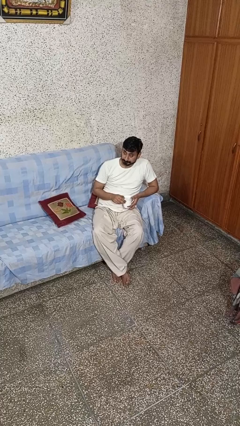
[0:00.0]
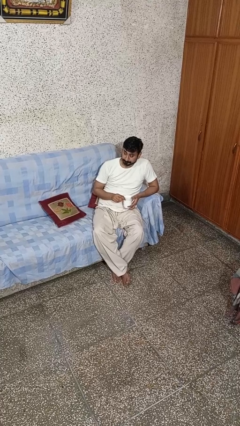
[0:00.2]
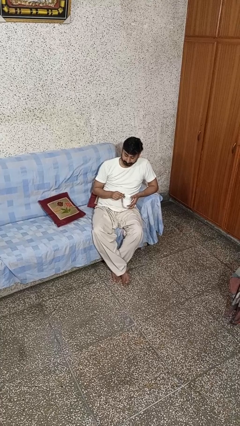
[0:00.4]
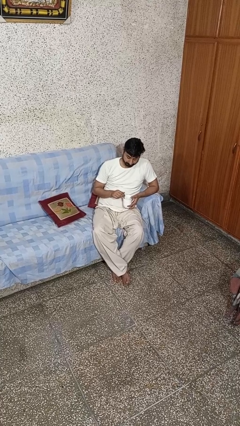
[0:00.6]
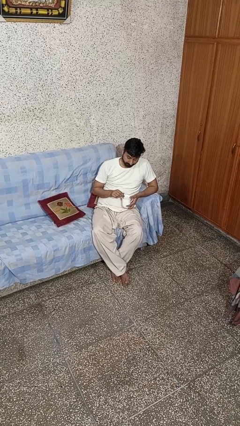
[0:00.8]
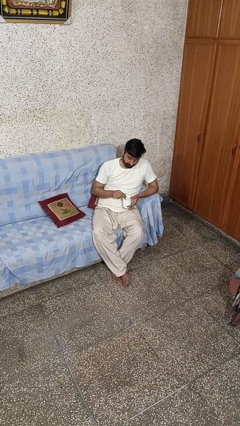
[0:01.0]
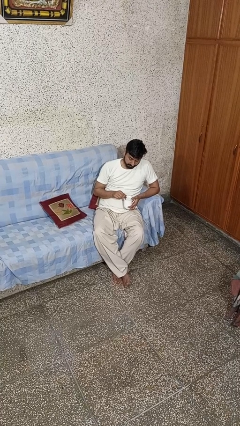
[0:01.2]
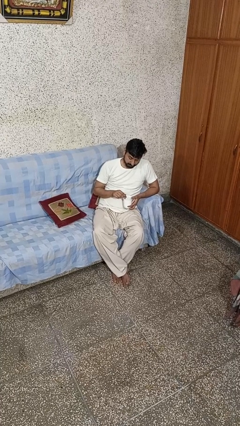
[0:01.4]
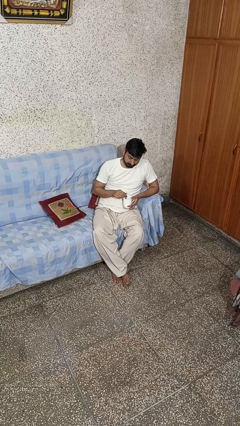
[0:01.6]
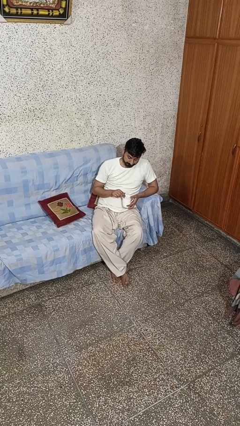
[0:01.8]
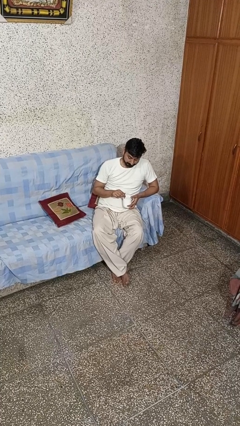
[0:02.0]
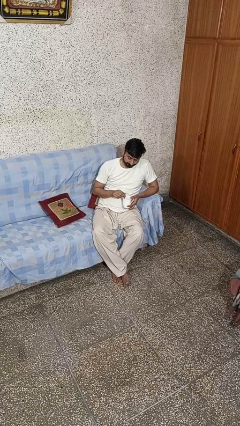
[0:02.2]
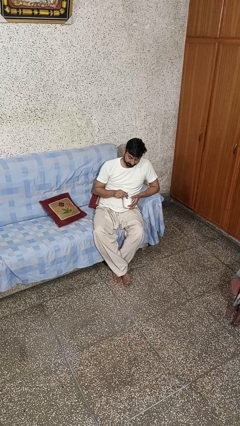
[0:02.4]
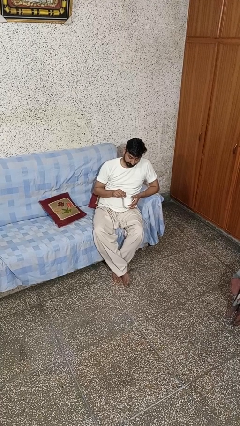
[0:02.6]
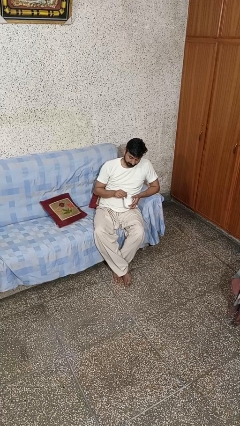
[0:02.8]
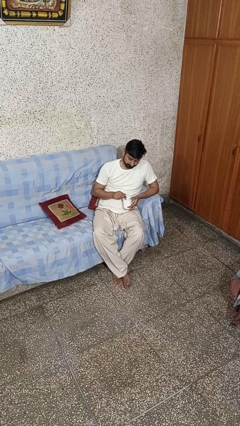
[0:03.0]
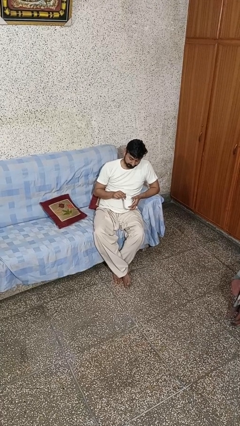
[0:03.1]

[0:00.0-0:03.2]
person stirs mug

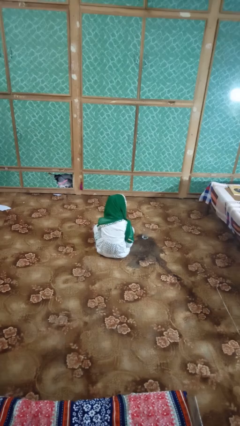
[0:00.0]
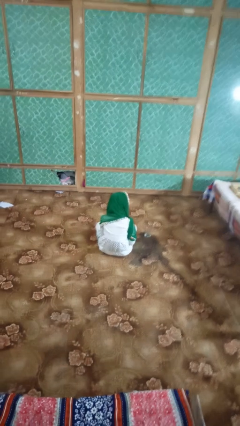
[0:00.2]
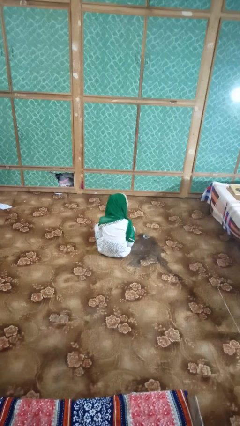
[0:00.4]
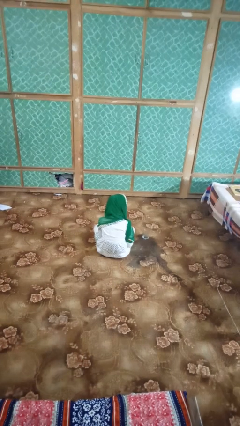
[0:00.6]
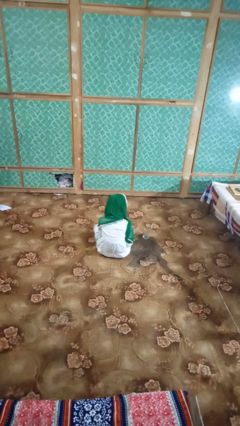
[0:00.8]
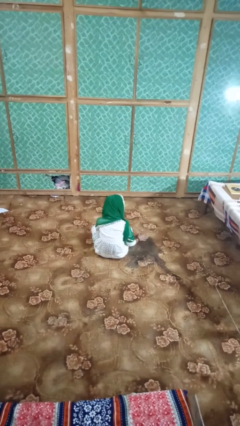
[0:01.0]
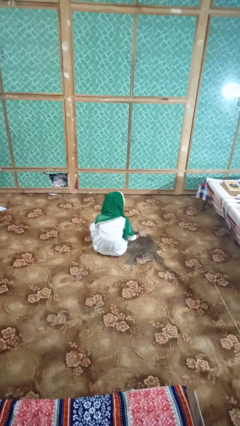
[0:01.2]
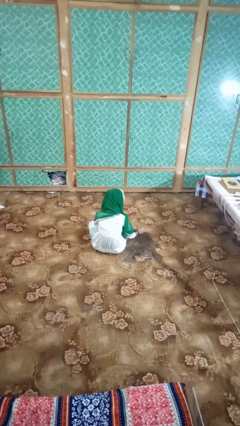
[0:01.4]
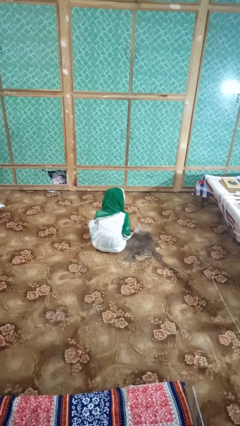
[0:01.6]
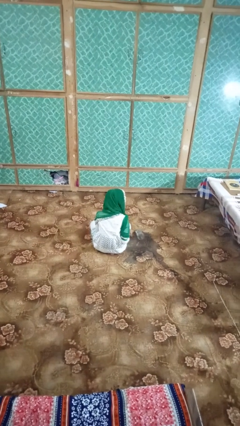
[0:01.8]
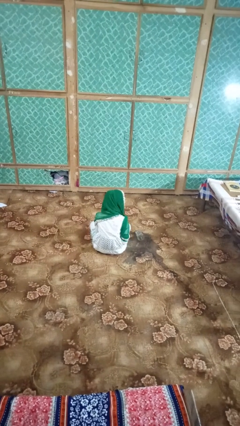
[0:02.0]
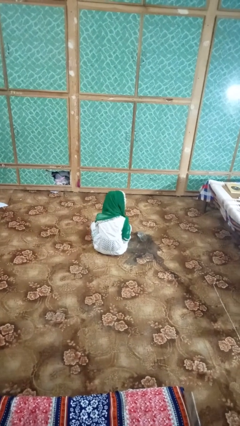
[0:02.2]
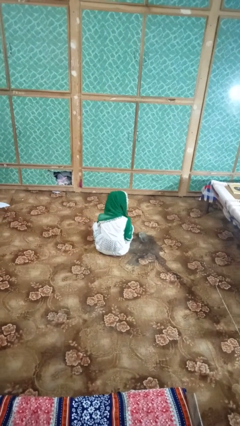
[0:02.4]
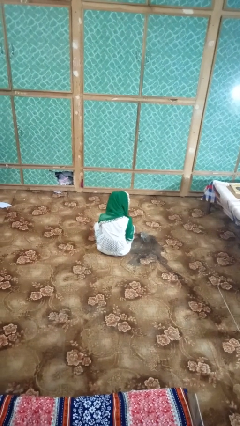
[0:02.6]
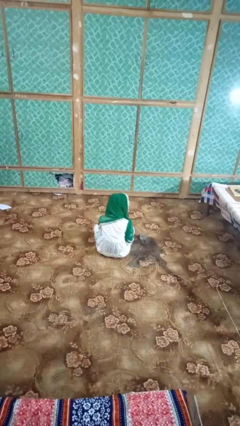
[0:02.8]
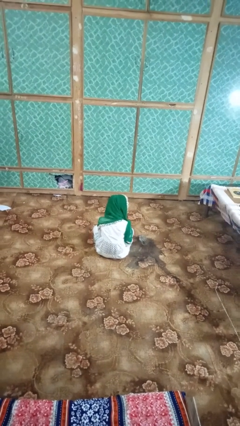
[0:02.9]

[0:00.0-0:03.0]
person spills on floor

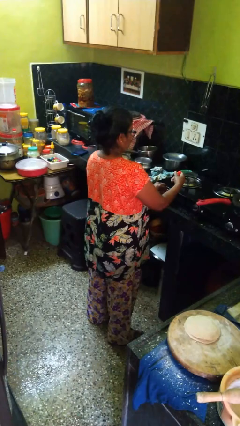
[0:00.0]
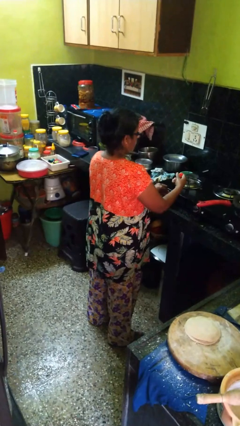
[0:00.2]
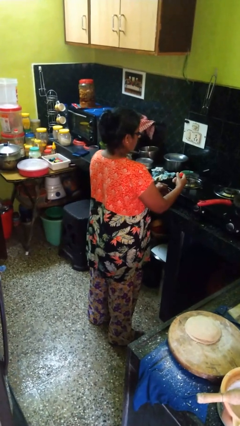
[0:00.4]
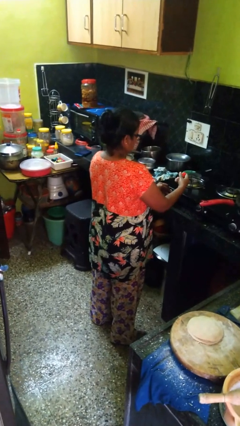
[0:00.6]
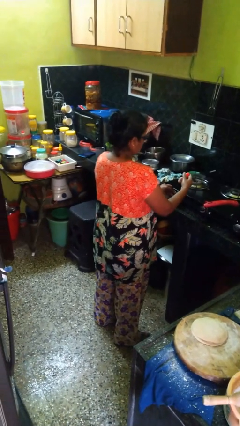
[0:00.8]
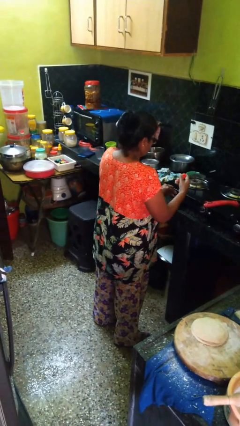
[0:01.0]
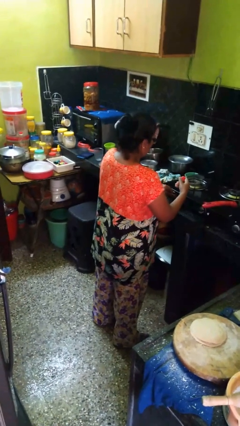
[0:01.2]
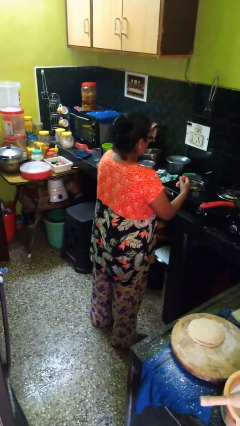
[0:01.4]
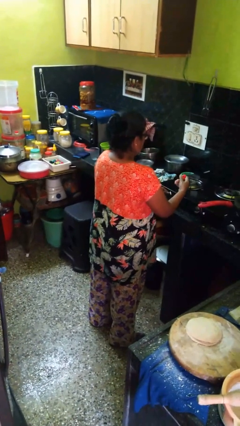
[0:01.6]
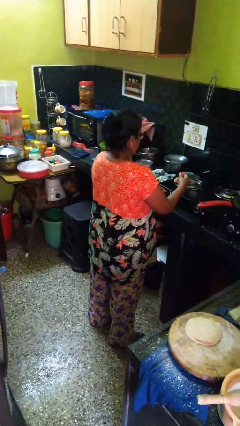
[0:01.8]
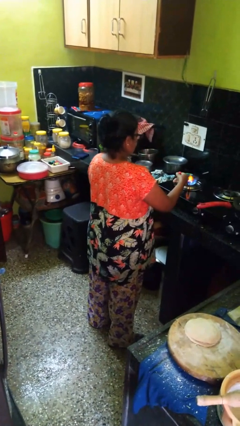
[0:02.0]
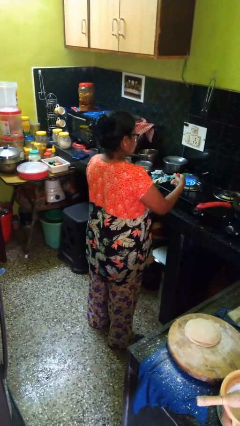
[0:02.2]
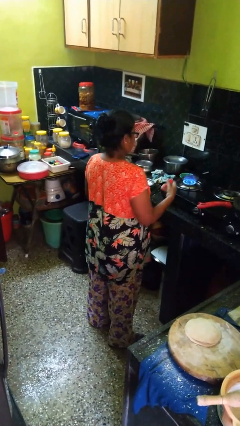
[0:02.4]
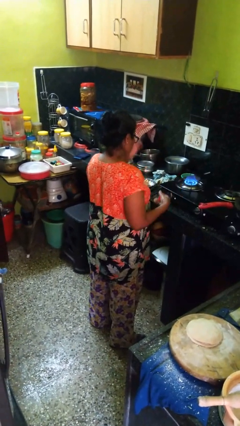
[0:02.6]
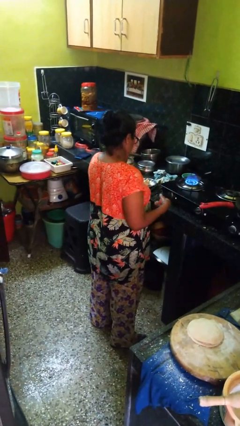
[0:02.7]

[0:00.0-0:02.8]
person turns on stovetop

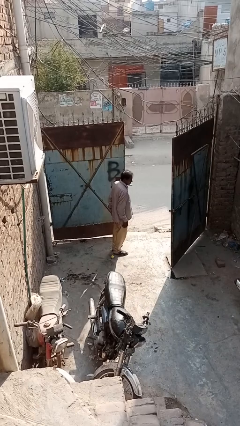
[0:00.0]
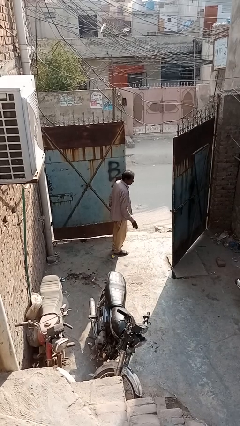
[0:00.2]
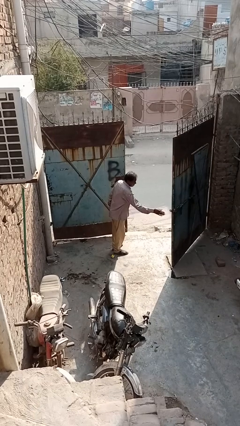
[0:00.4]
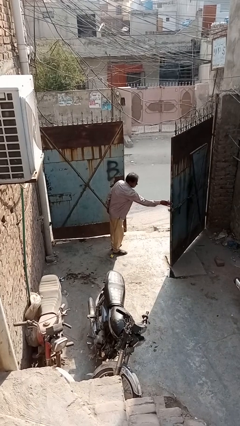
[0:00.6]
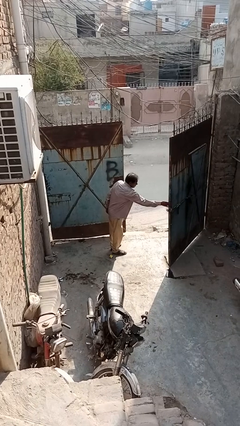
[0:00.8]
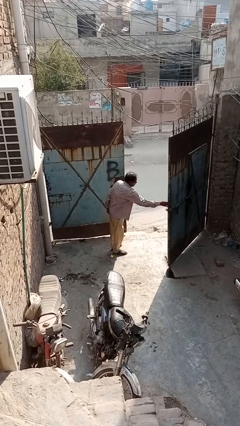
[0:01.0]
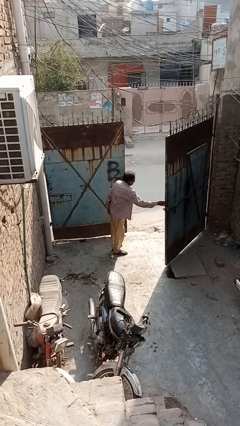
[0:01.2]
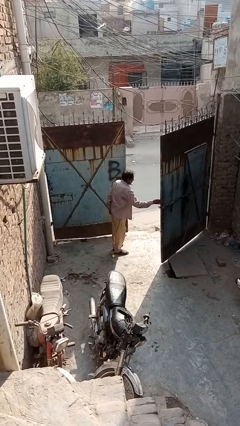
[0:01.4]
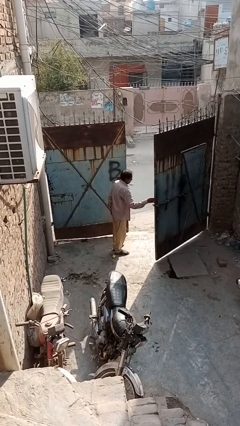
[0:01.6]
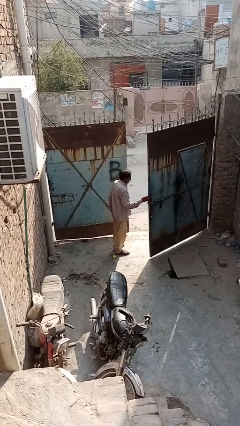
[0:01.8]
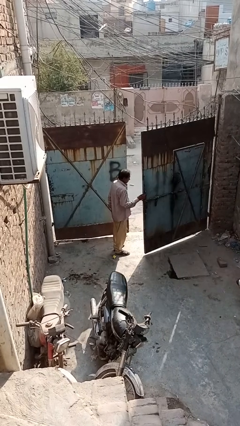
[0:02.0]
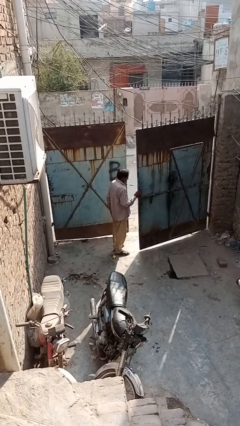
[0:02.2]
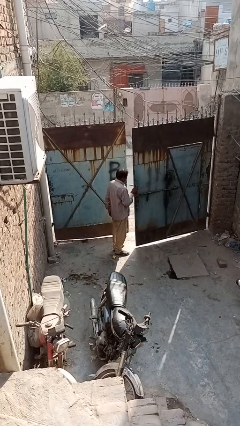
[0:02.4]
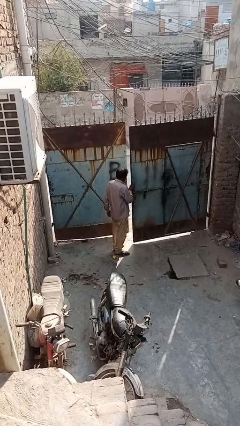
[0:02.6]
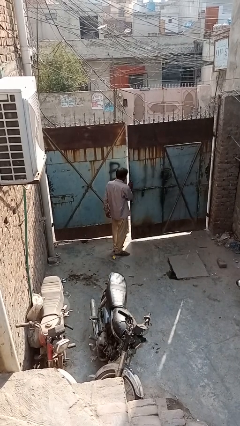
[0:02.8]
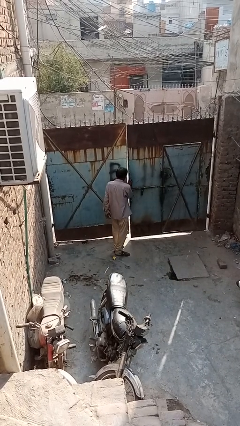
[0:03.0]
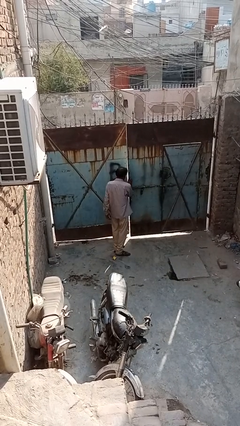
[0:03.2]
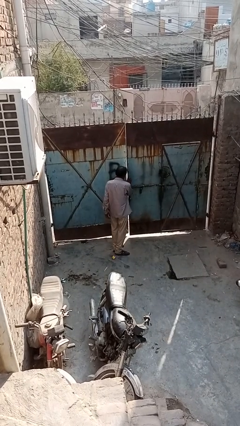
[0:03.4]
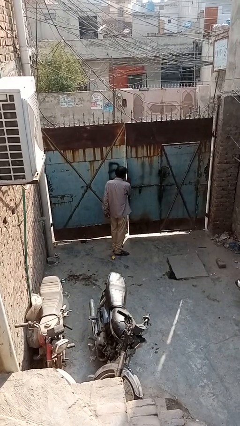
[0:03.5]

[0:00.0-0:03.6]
person closes gate

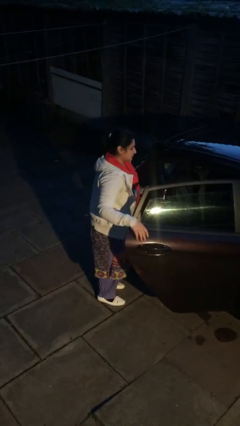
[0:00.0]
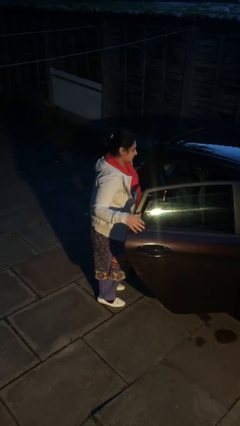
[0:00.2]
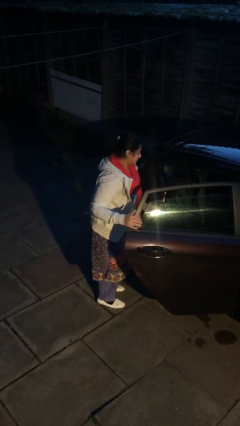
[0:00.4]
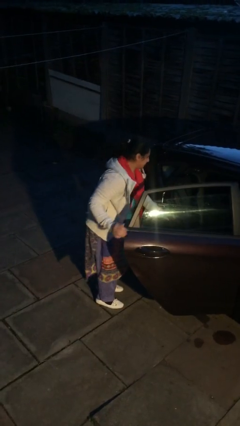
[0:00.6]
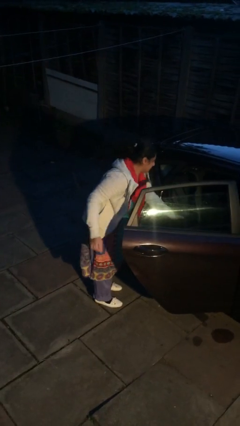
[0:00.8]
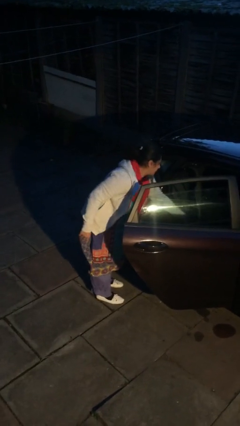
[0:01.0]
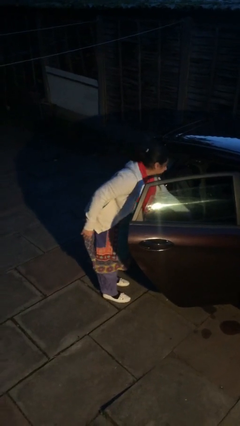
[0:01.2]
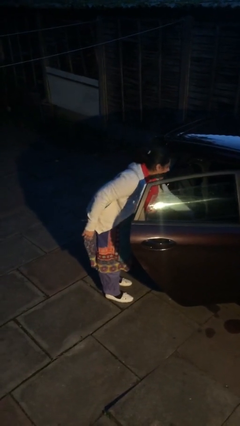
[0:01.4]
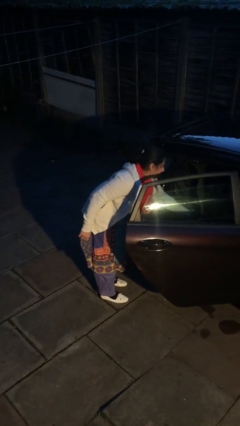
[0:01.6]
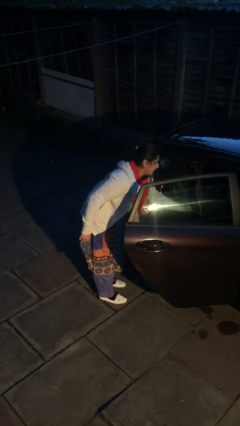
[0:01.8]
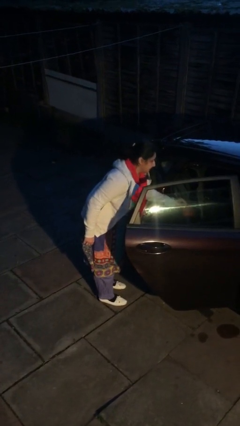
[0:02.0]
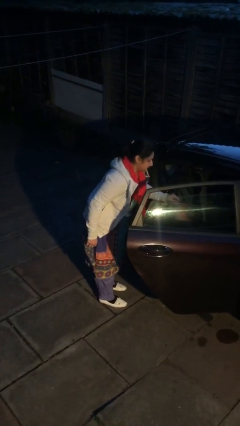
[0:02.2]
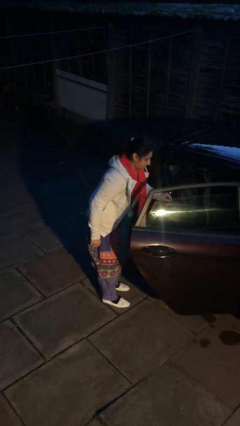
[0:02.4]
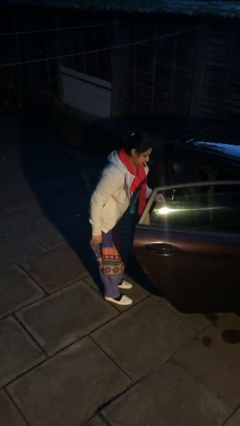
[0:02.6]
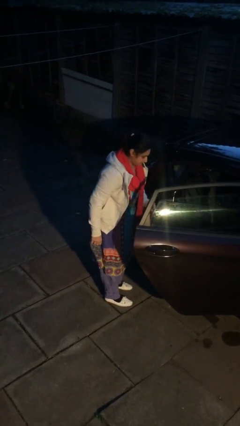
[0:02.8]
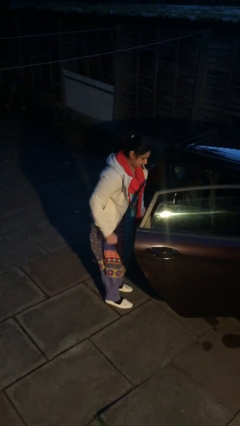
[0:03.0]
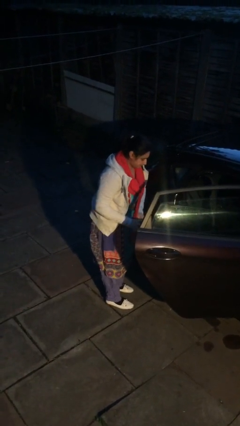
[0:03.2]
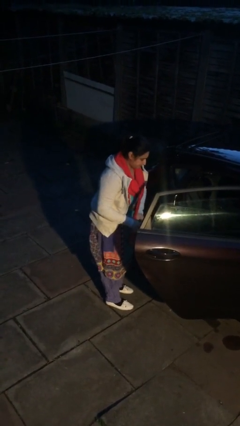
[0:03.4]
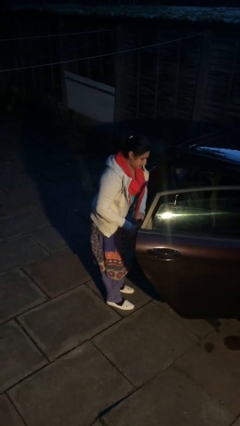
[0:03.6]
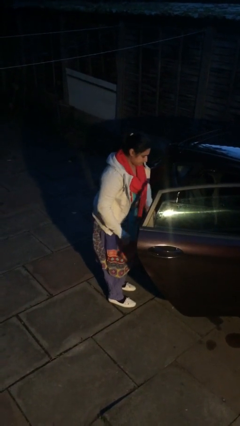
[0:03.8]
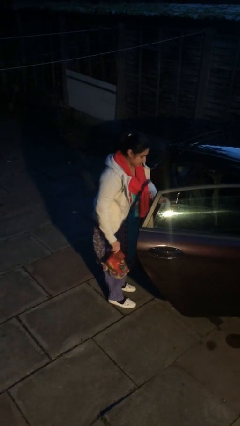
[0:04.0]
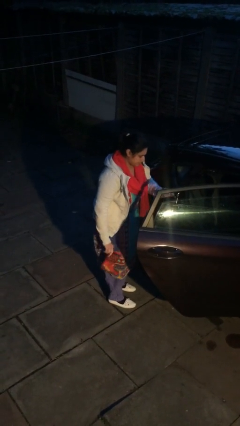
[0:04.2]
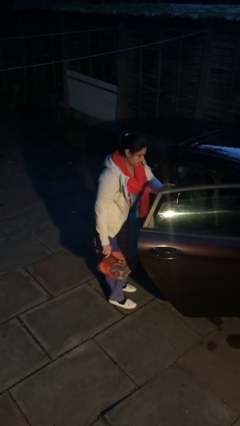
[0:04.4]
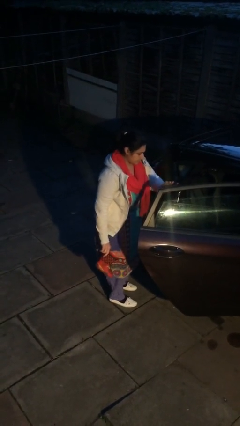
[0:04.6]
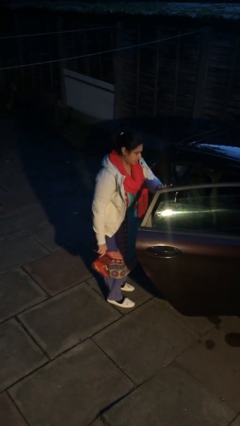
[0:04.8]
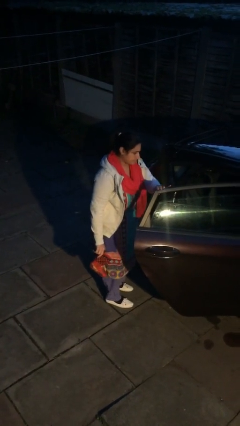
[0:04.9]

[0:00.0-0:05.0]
person unloads car
